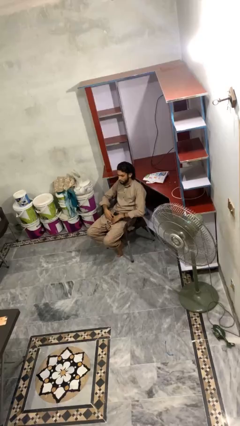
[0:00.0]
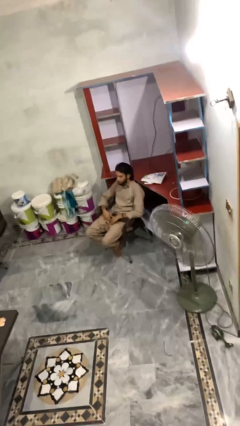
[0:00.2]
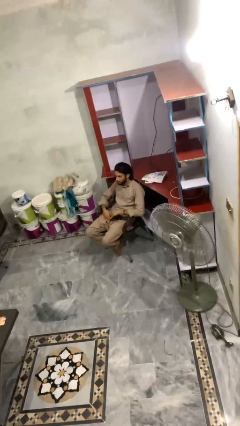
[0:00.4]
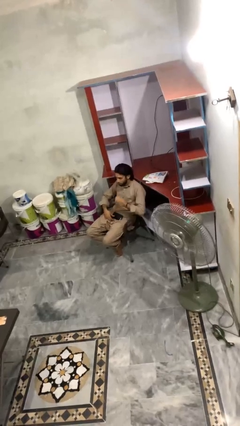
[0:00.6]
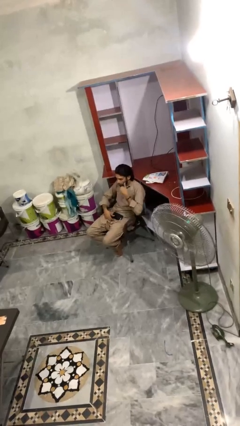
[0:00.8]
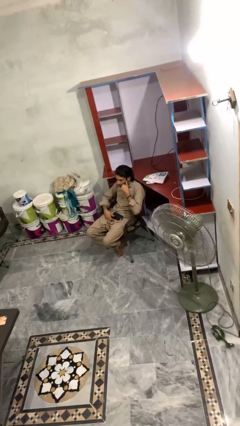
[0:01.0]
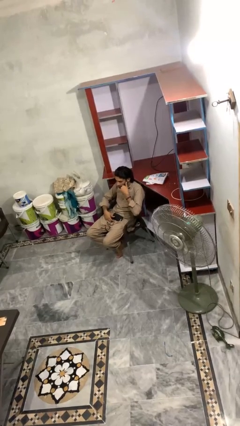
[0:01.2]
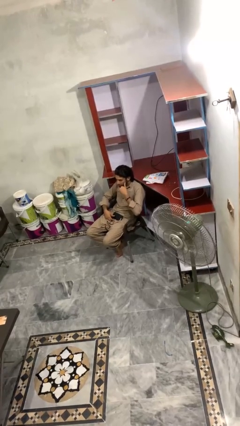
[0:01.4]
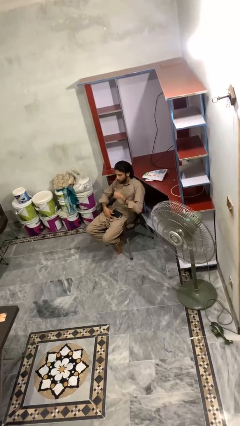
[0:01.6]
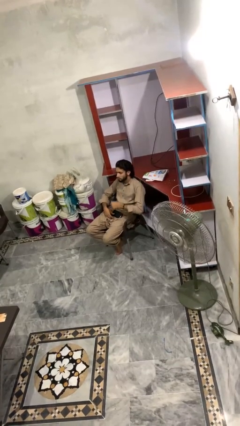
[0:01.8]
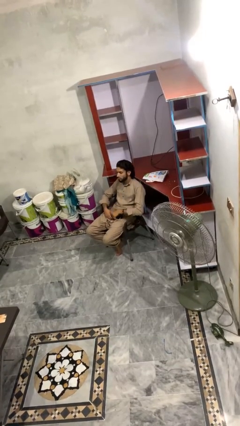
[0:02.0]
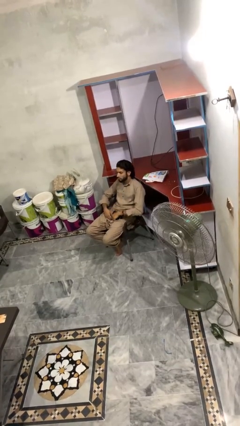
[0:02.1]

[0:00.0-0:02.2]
person gestures call me

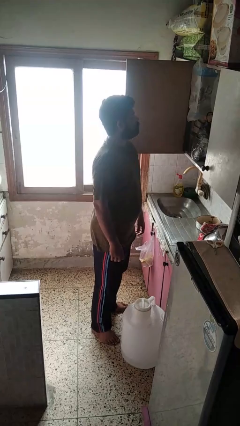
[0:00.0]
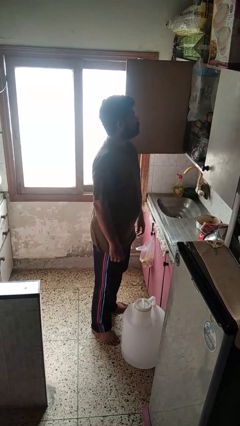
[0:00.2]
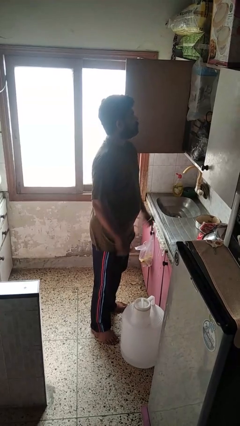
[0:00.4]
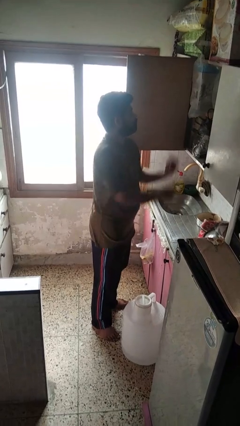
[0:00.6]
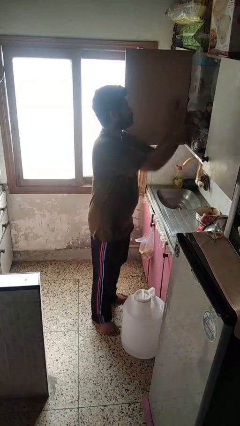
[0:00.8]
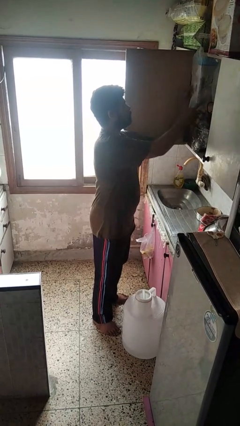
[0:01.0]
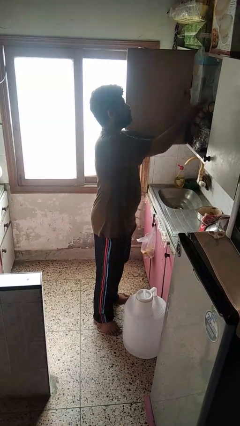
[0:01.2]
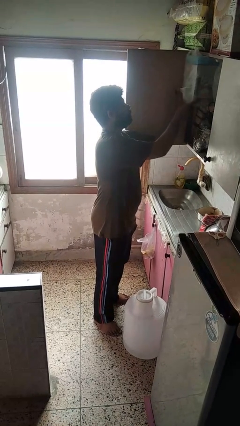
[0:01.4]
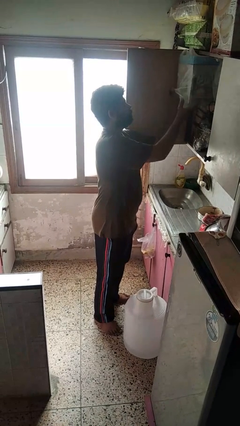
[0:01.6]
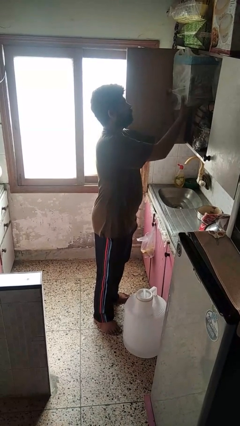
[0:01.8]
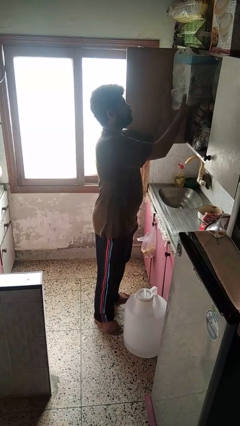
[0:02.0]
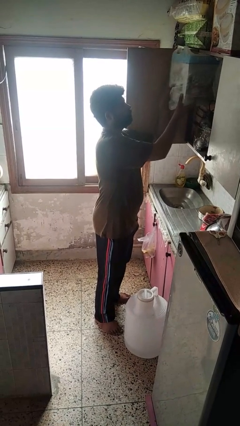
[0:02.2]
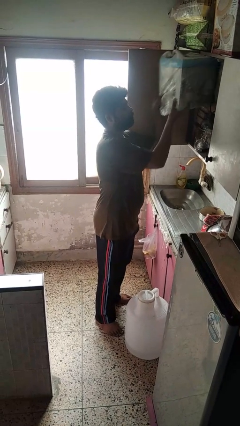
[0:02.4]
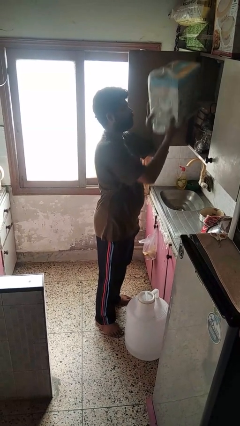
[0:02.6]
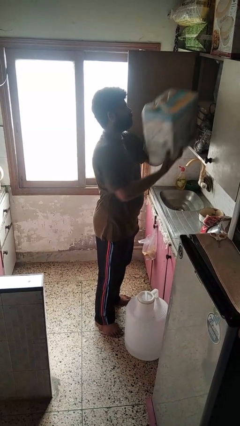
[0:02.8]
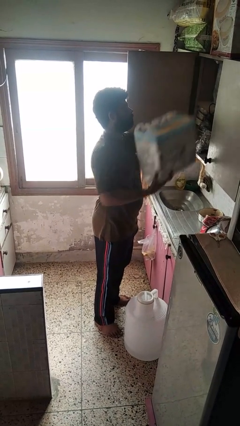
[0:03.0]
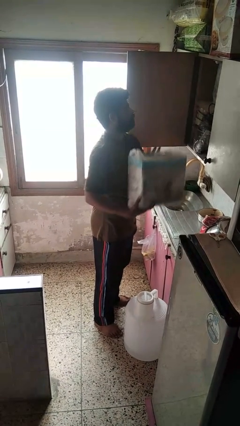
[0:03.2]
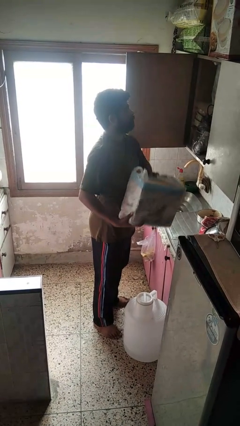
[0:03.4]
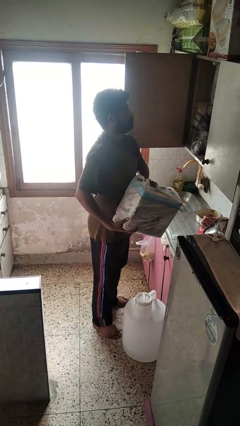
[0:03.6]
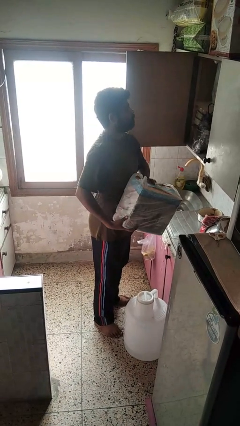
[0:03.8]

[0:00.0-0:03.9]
person picks up object from cabinet

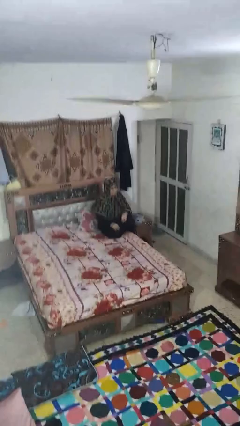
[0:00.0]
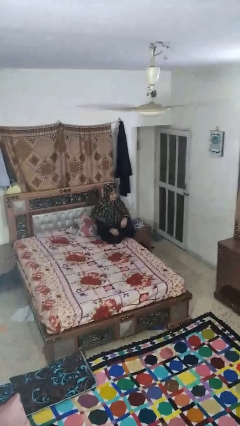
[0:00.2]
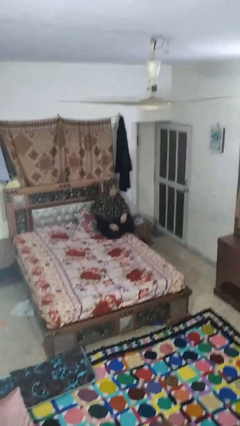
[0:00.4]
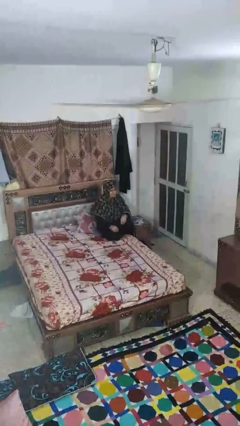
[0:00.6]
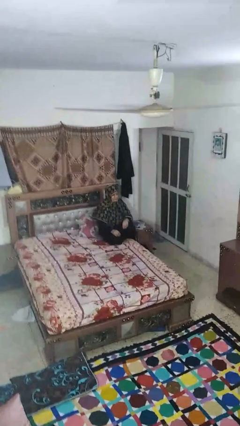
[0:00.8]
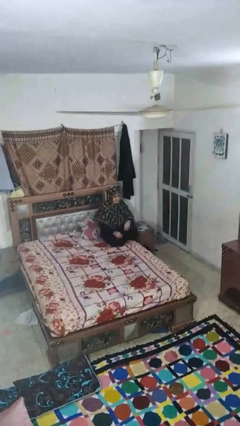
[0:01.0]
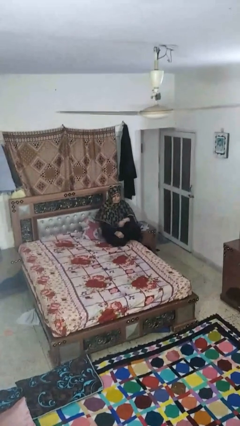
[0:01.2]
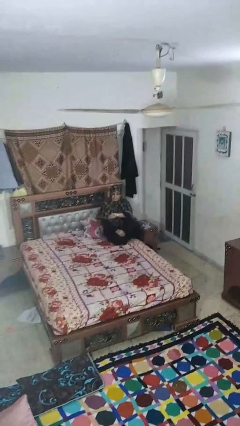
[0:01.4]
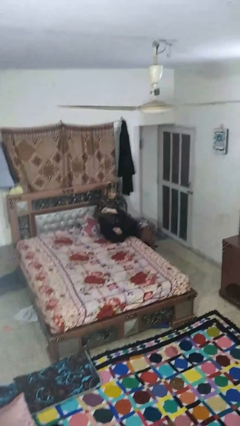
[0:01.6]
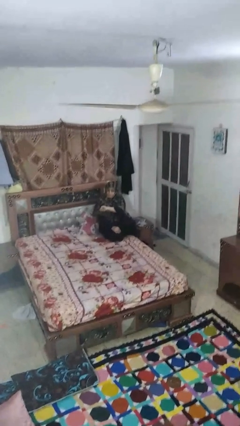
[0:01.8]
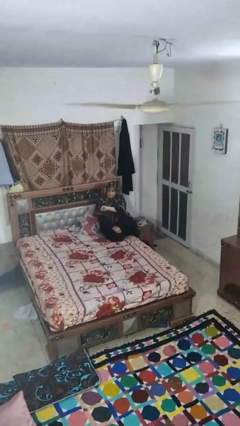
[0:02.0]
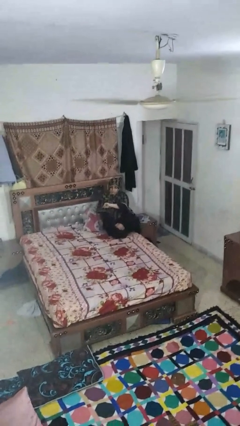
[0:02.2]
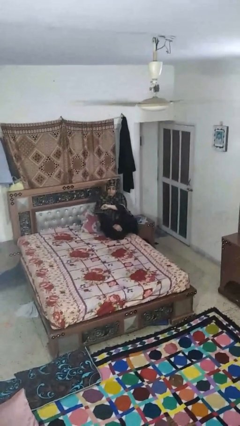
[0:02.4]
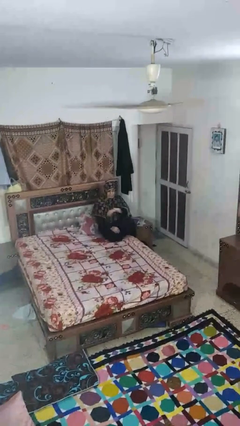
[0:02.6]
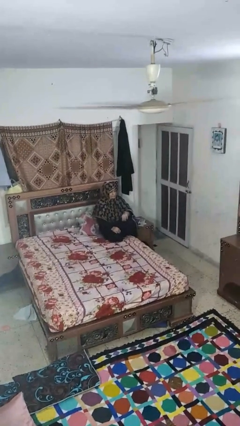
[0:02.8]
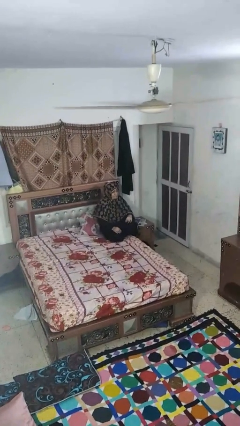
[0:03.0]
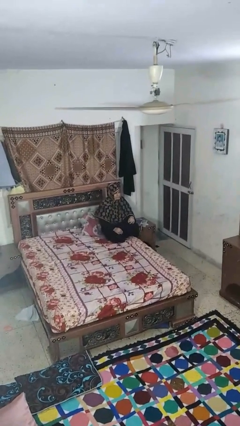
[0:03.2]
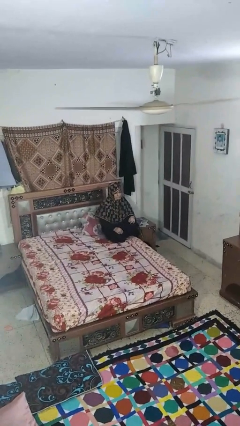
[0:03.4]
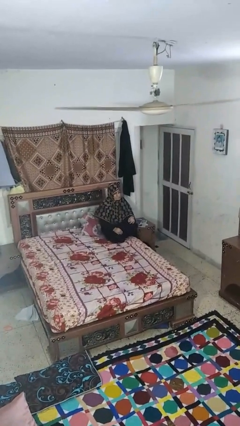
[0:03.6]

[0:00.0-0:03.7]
person looks at wristwatch

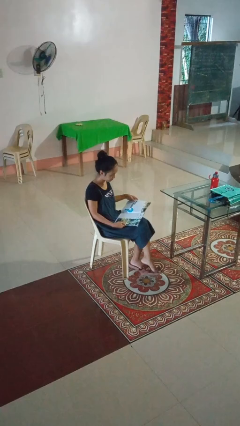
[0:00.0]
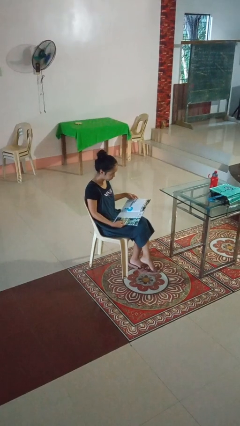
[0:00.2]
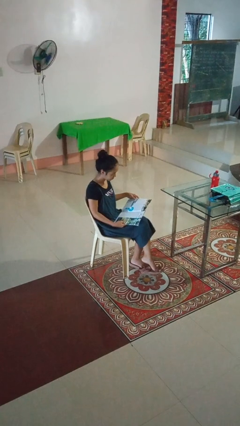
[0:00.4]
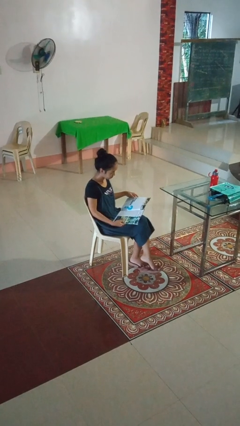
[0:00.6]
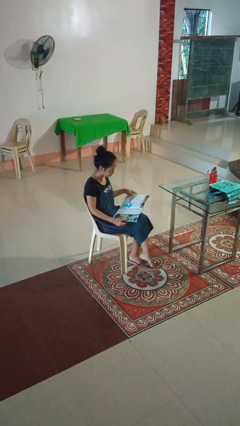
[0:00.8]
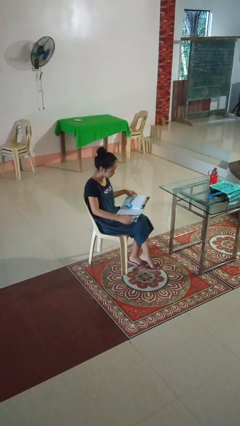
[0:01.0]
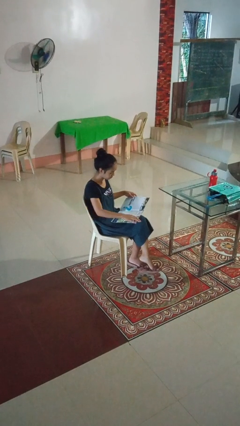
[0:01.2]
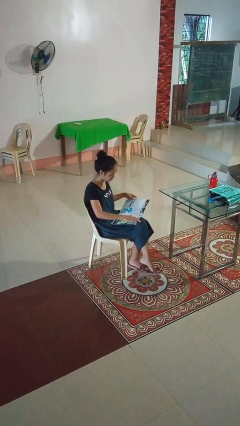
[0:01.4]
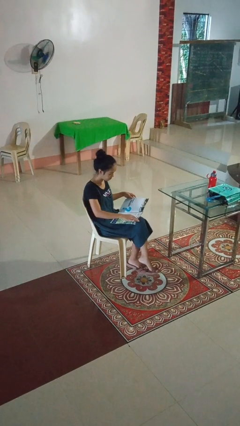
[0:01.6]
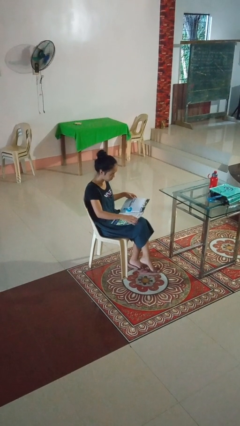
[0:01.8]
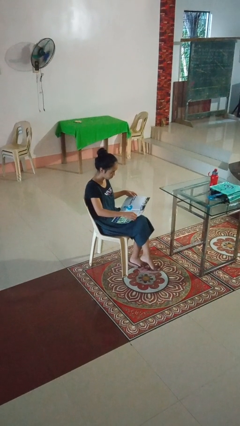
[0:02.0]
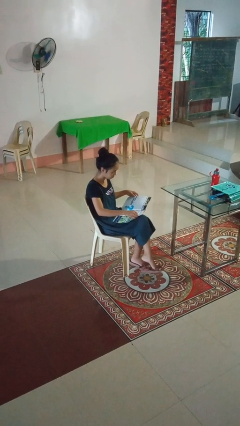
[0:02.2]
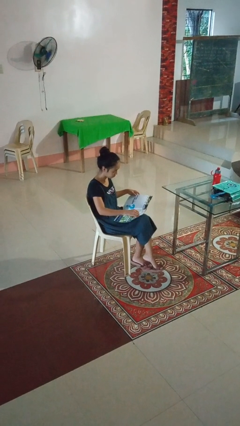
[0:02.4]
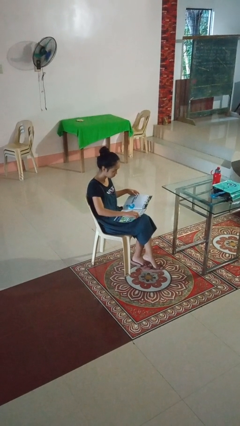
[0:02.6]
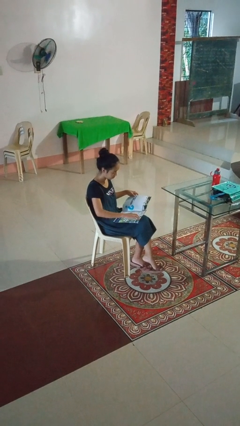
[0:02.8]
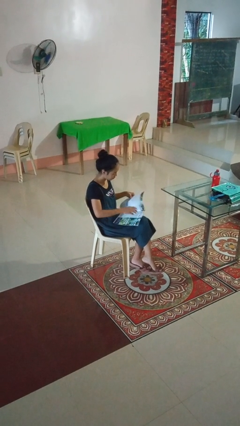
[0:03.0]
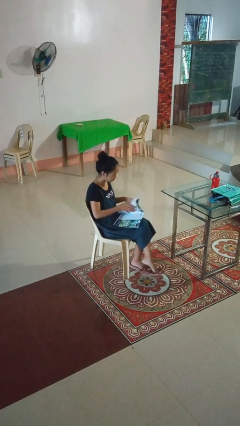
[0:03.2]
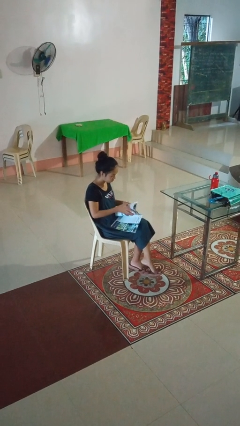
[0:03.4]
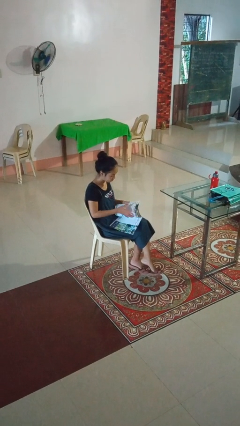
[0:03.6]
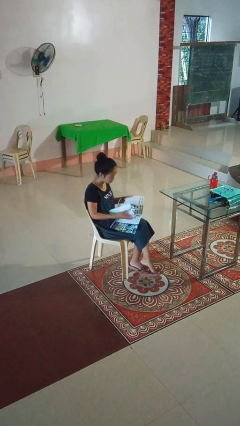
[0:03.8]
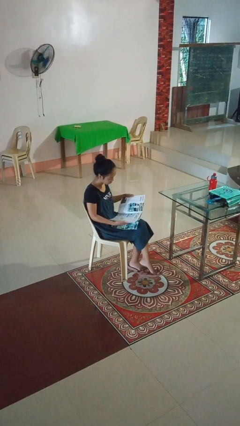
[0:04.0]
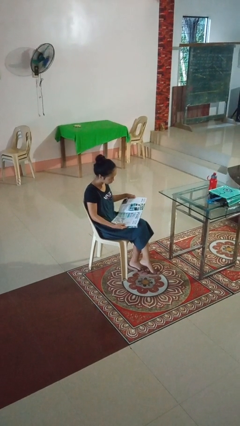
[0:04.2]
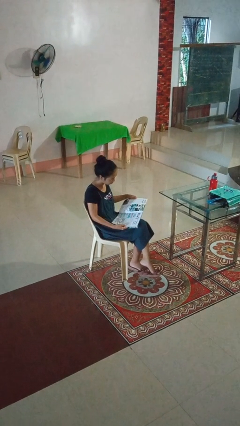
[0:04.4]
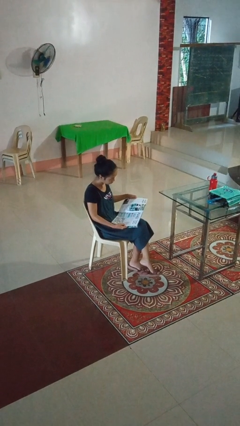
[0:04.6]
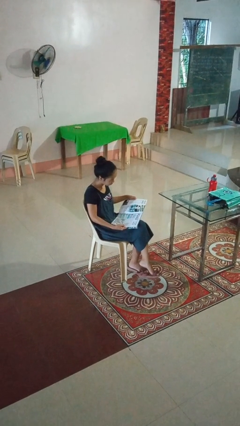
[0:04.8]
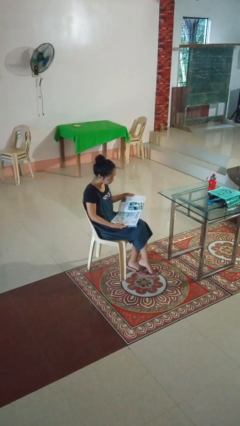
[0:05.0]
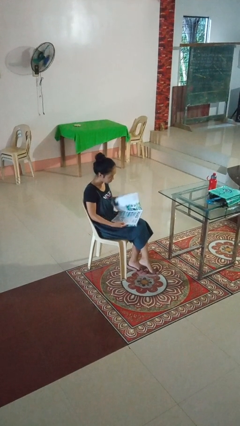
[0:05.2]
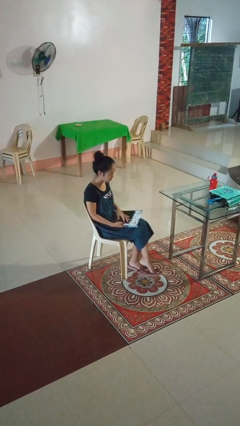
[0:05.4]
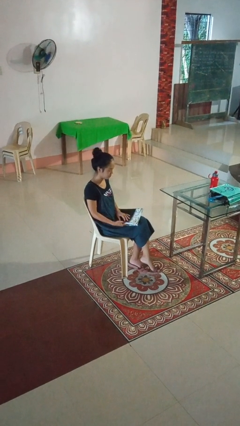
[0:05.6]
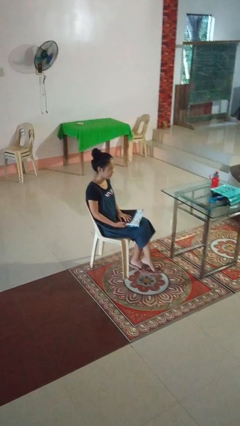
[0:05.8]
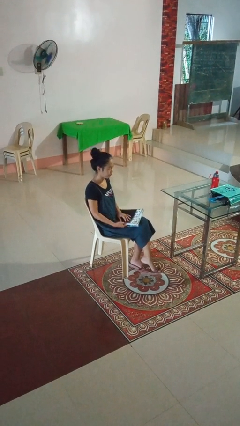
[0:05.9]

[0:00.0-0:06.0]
person reads magazine

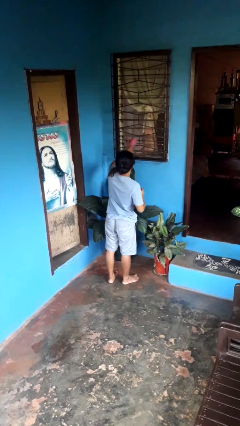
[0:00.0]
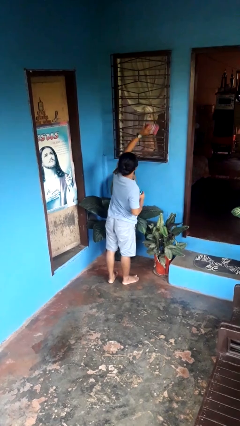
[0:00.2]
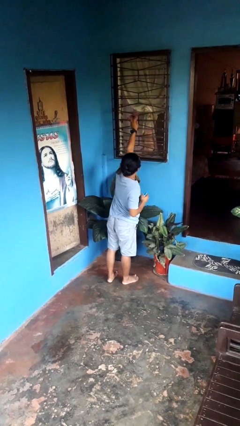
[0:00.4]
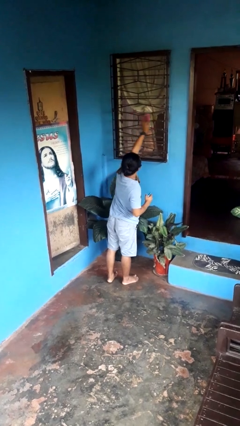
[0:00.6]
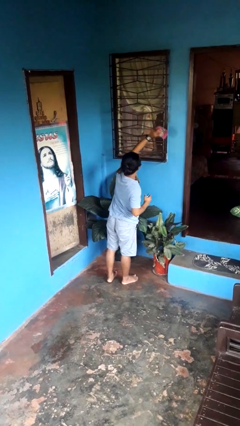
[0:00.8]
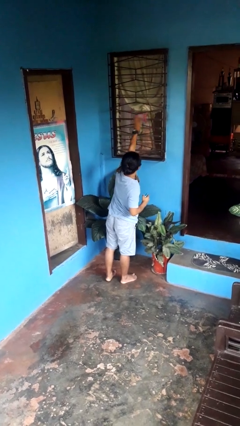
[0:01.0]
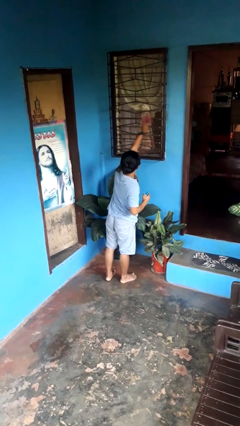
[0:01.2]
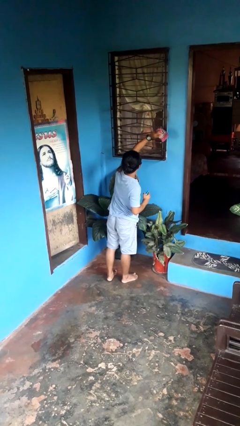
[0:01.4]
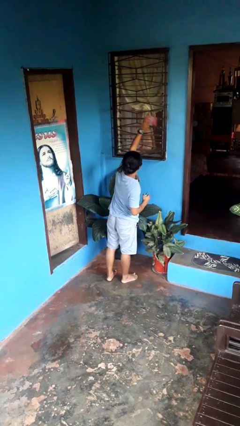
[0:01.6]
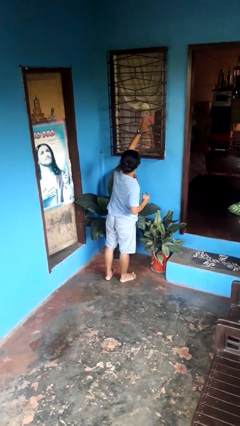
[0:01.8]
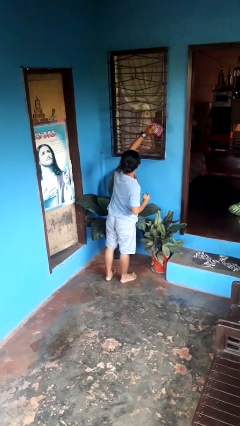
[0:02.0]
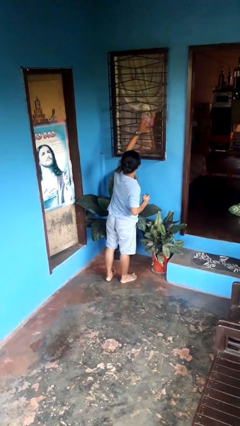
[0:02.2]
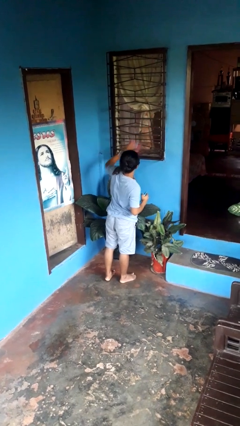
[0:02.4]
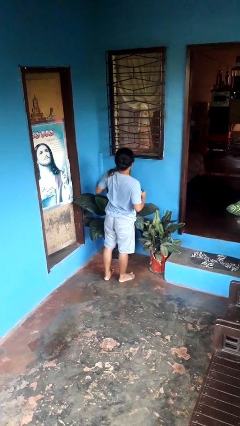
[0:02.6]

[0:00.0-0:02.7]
person washes window
